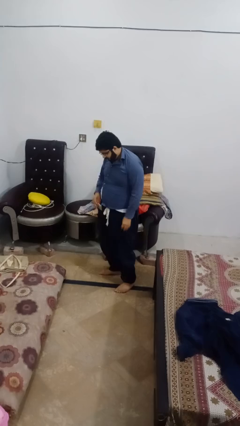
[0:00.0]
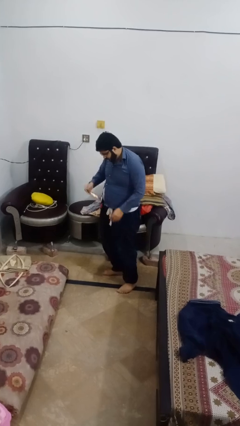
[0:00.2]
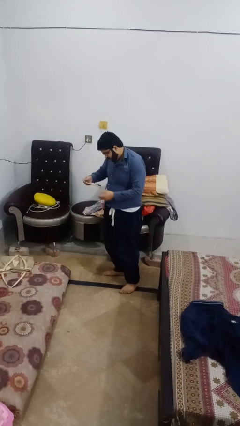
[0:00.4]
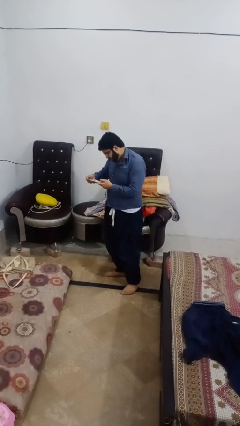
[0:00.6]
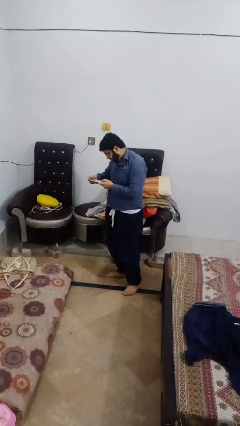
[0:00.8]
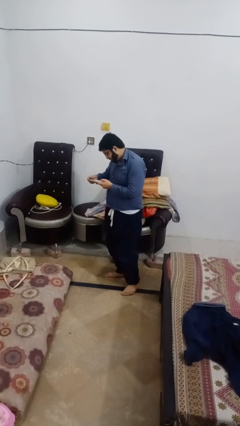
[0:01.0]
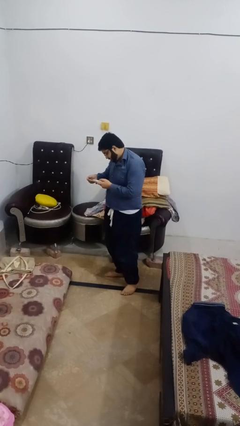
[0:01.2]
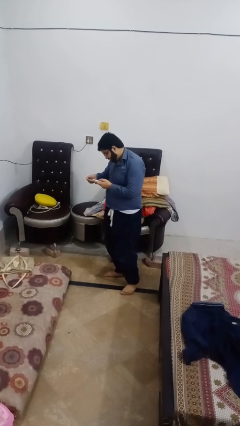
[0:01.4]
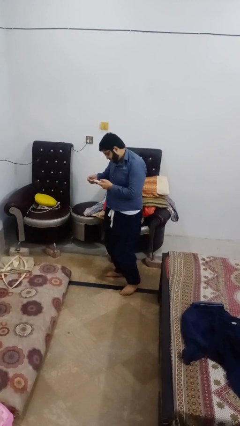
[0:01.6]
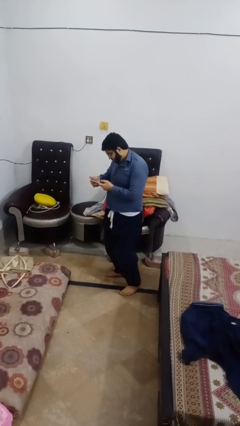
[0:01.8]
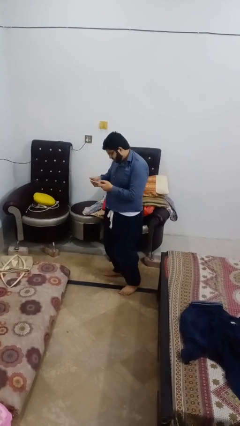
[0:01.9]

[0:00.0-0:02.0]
person takes phone from pocket

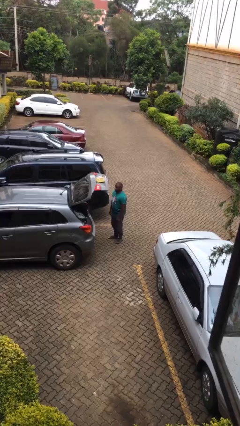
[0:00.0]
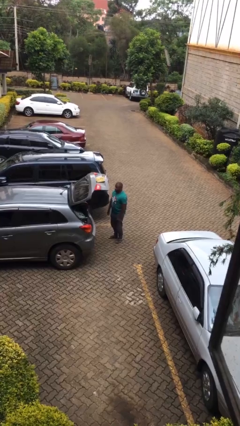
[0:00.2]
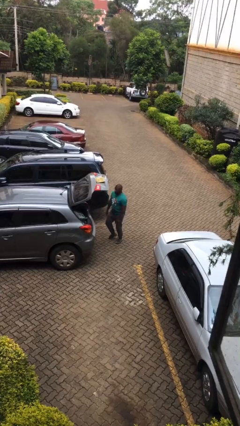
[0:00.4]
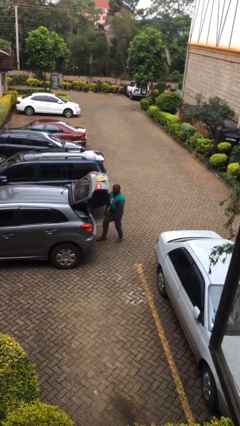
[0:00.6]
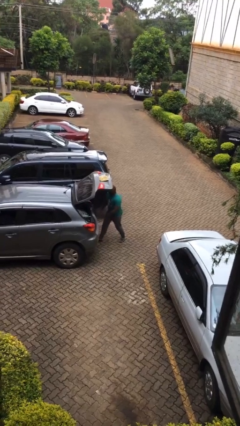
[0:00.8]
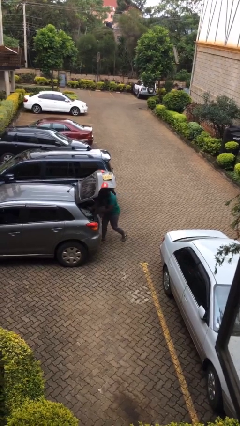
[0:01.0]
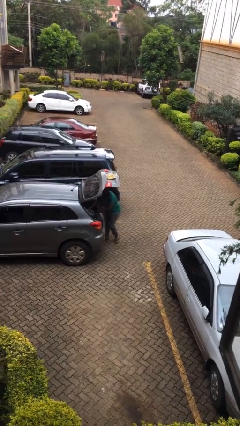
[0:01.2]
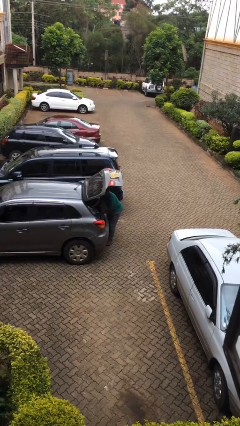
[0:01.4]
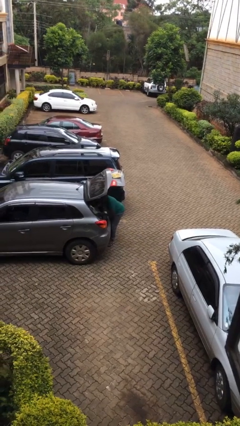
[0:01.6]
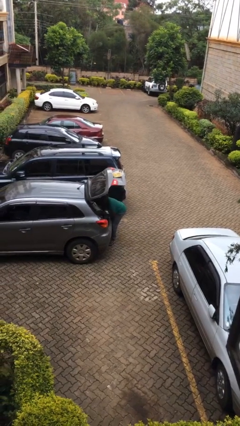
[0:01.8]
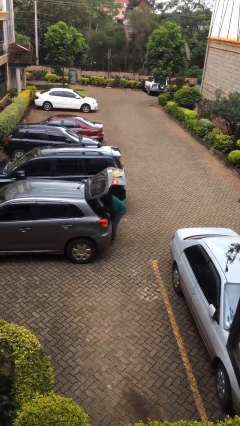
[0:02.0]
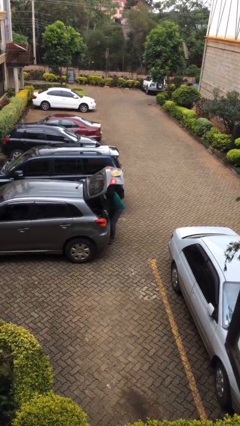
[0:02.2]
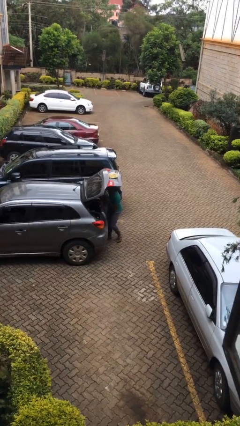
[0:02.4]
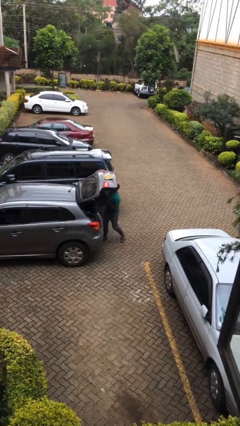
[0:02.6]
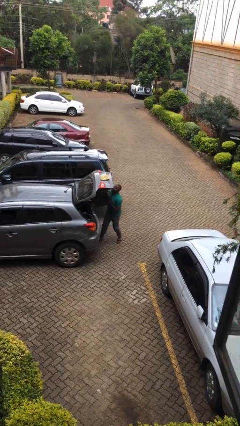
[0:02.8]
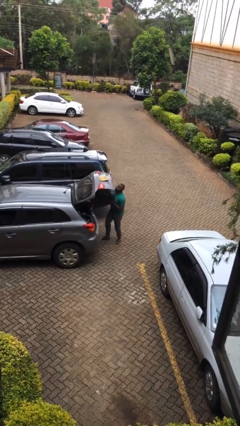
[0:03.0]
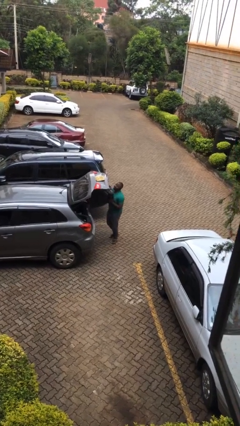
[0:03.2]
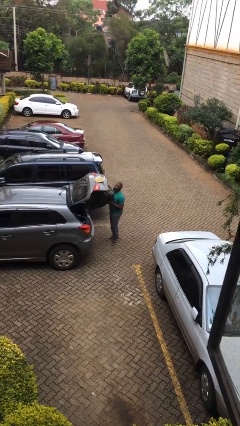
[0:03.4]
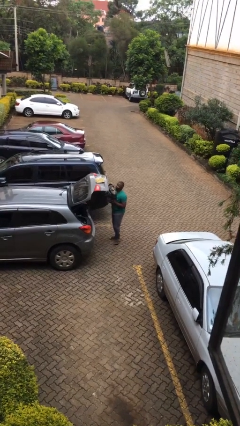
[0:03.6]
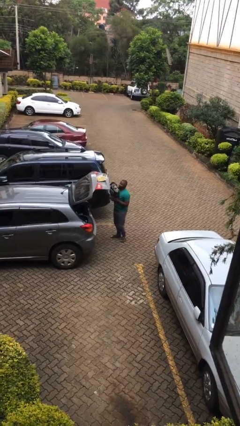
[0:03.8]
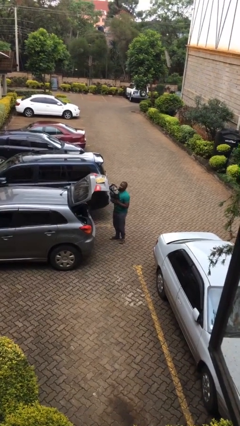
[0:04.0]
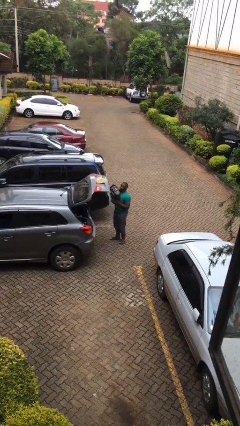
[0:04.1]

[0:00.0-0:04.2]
person unloads car

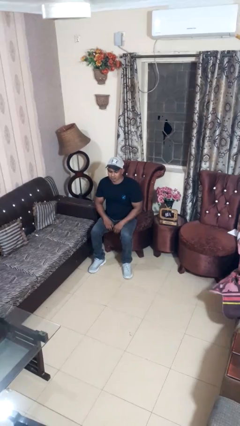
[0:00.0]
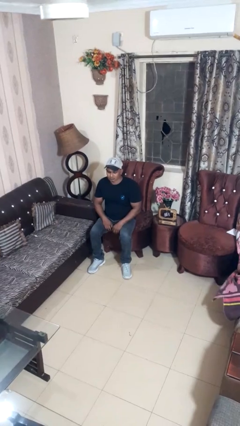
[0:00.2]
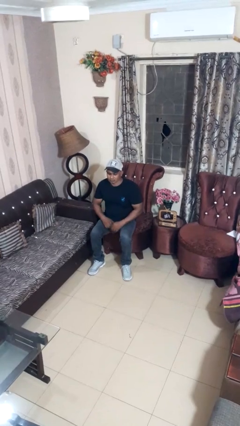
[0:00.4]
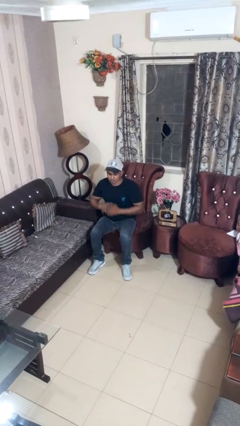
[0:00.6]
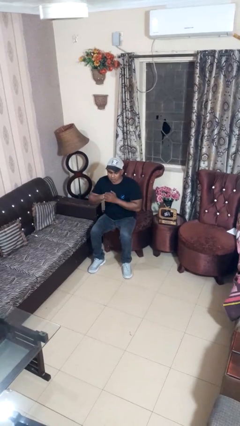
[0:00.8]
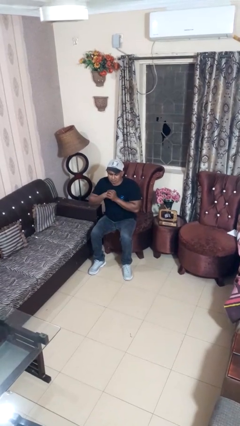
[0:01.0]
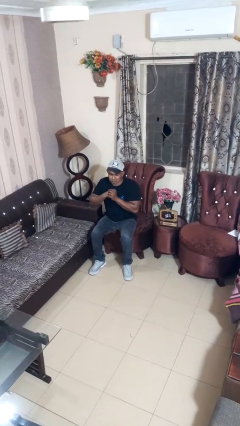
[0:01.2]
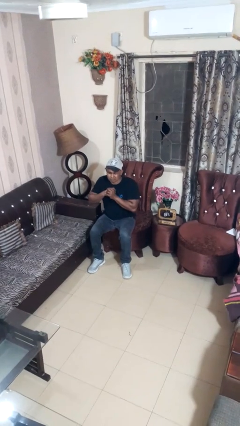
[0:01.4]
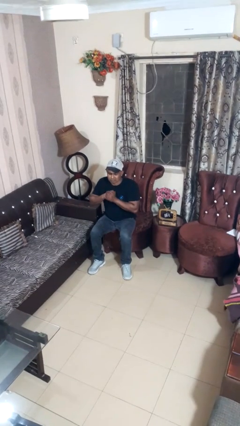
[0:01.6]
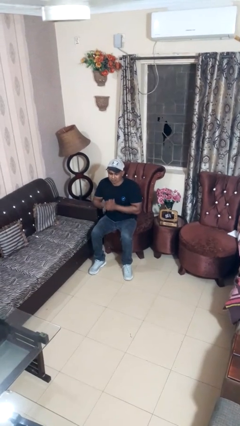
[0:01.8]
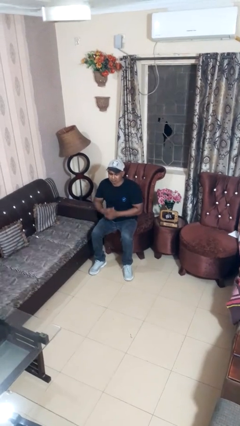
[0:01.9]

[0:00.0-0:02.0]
person cracks knuckles

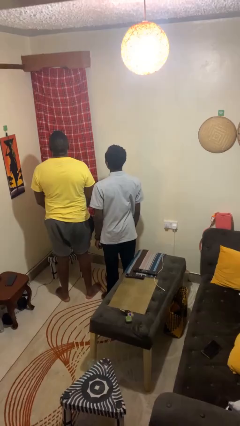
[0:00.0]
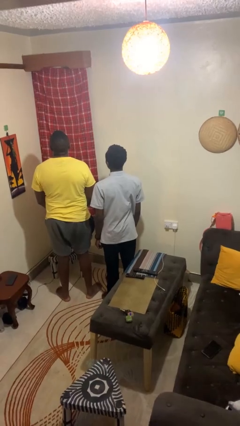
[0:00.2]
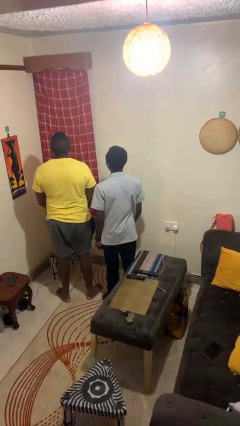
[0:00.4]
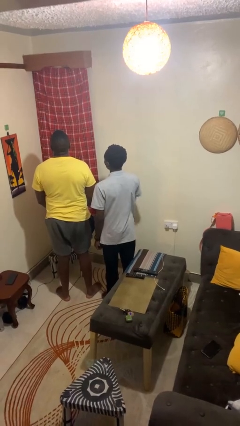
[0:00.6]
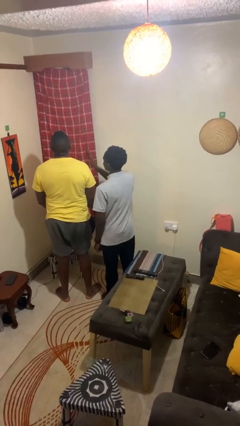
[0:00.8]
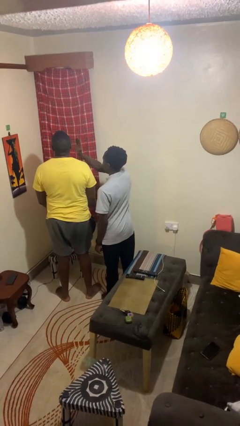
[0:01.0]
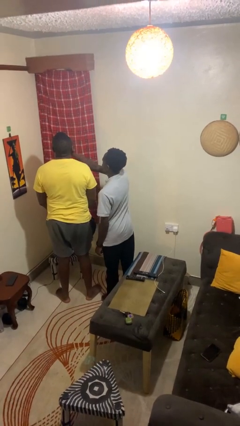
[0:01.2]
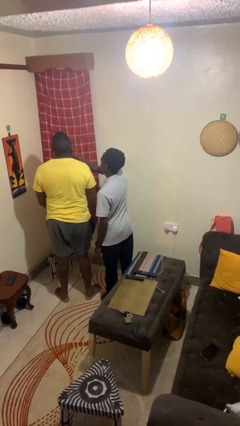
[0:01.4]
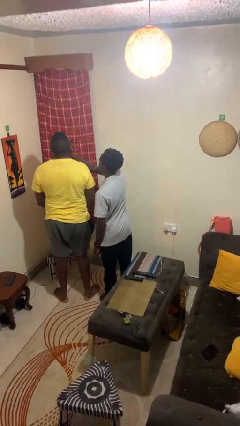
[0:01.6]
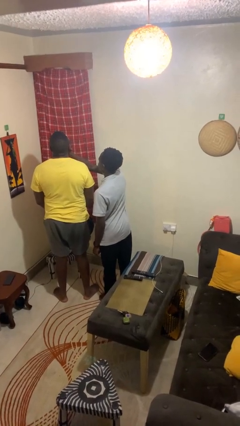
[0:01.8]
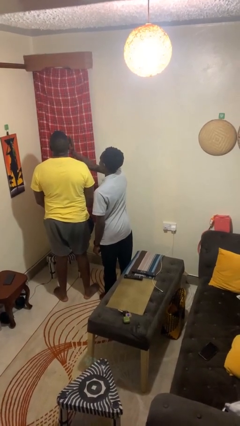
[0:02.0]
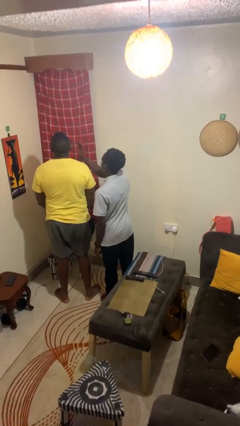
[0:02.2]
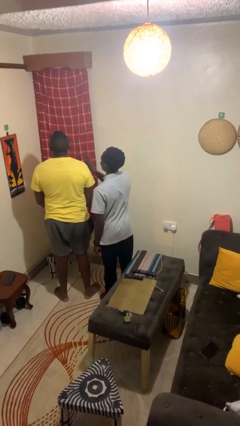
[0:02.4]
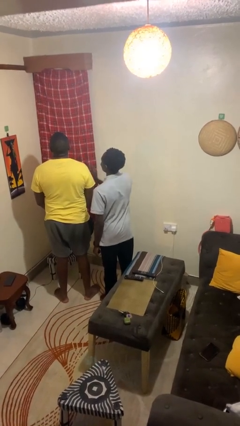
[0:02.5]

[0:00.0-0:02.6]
person touches face of person

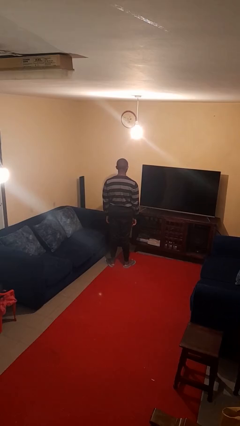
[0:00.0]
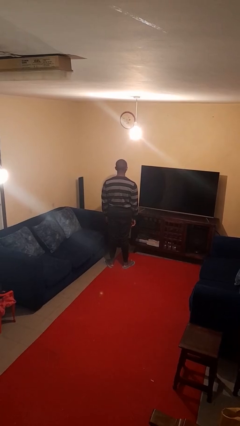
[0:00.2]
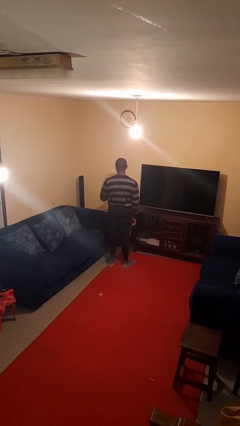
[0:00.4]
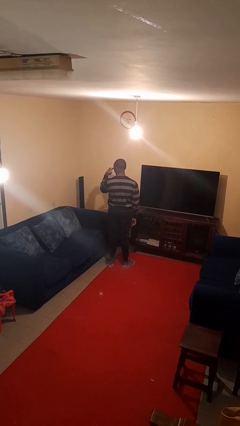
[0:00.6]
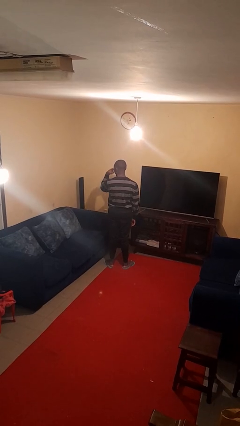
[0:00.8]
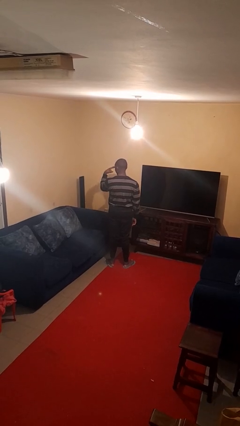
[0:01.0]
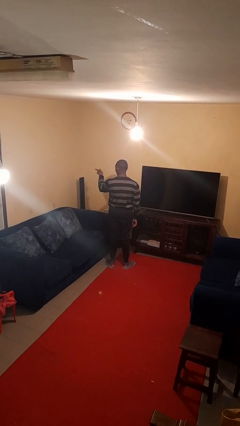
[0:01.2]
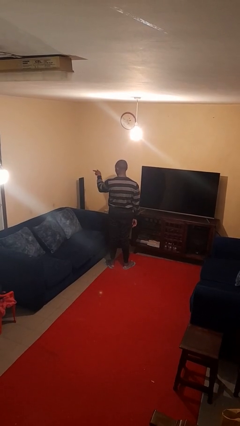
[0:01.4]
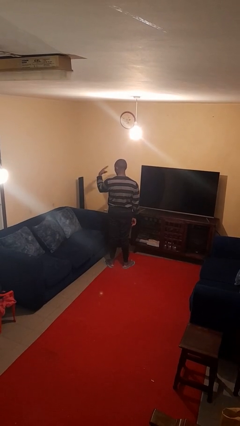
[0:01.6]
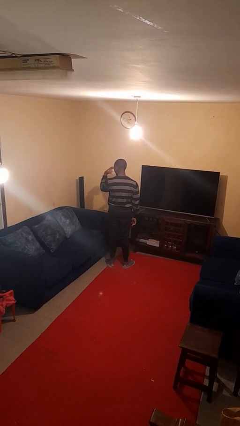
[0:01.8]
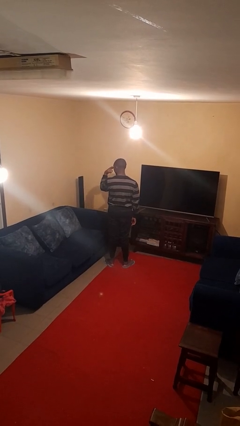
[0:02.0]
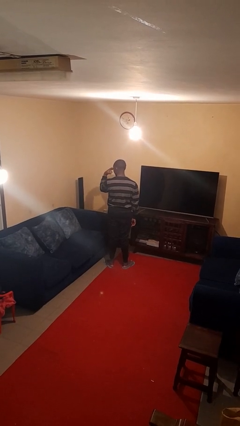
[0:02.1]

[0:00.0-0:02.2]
person gestures watch closely

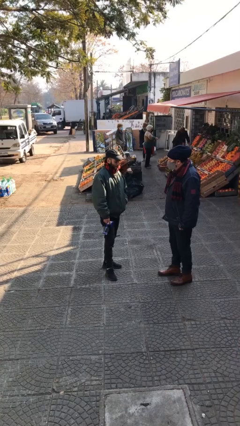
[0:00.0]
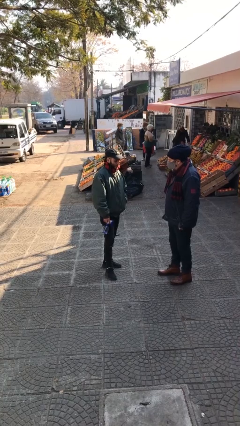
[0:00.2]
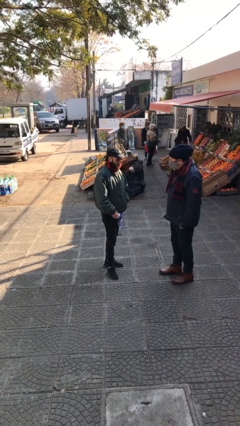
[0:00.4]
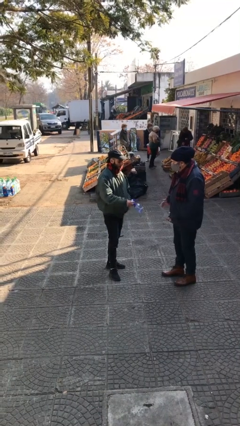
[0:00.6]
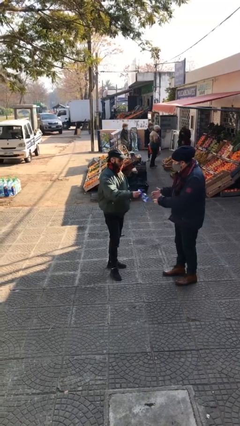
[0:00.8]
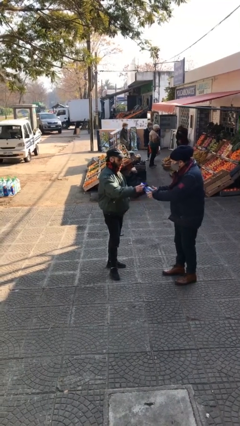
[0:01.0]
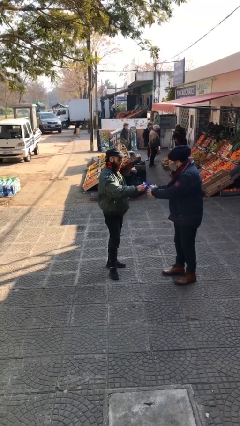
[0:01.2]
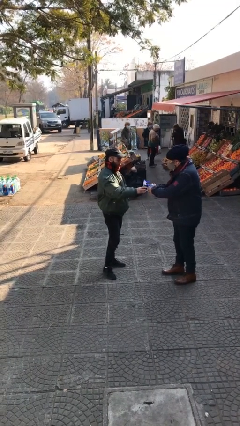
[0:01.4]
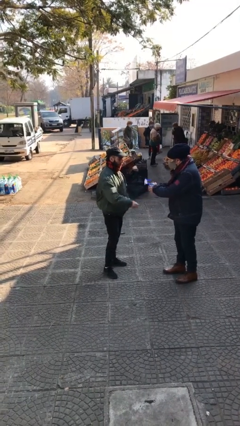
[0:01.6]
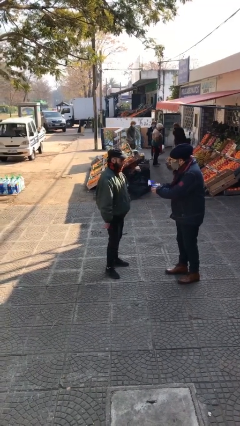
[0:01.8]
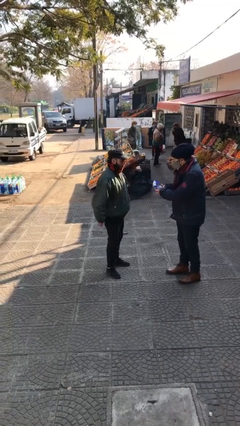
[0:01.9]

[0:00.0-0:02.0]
person transfers object to person

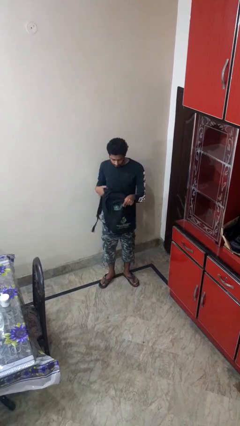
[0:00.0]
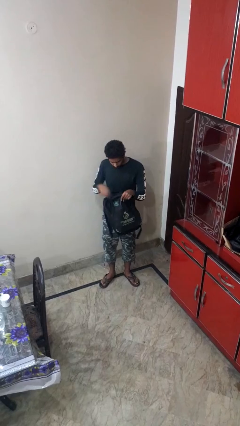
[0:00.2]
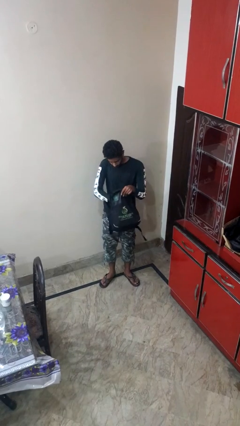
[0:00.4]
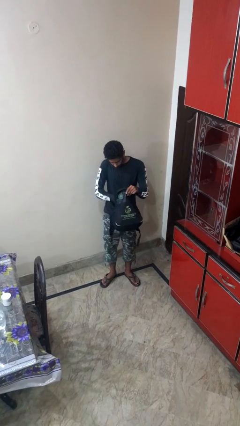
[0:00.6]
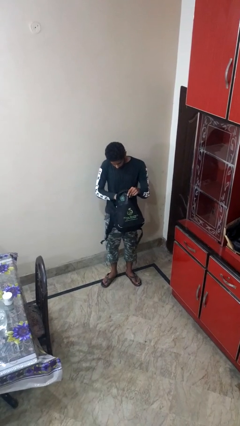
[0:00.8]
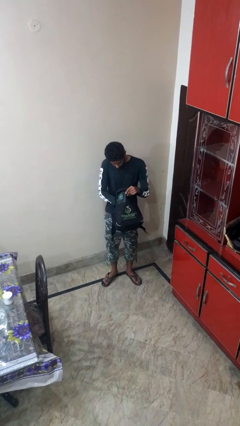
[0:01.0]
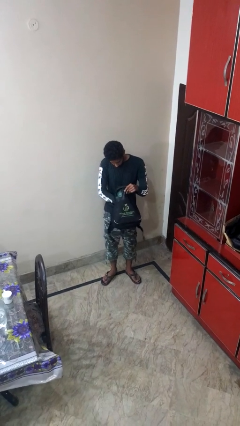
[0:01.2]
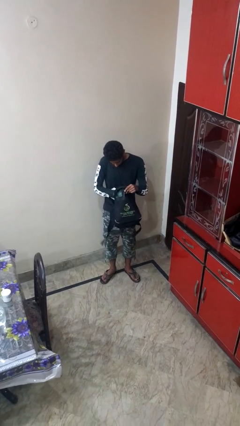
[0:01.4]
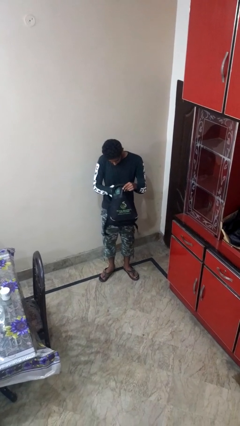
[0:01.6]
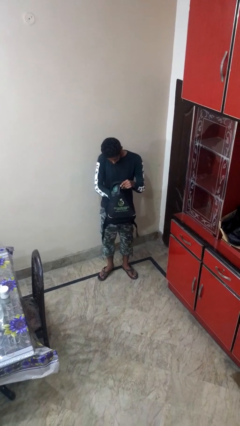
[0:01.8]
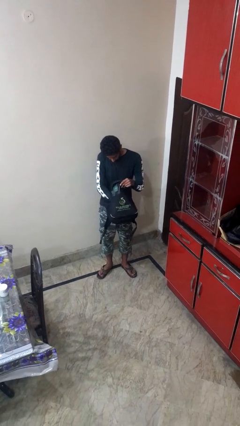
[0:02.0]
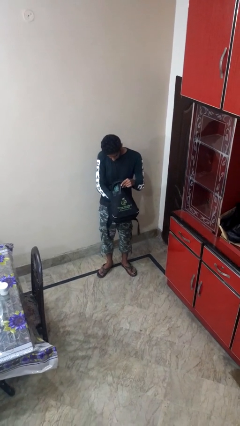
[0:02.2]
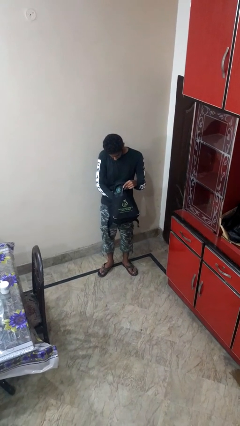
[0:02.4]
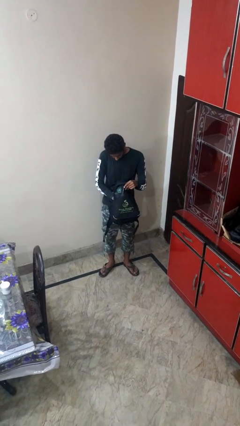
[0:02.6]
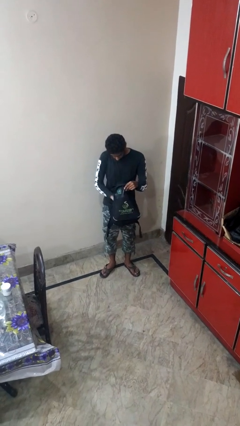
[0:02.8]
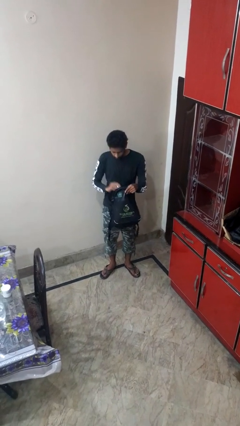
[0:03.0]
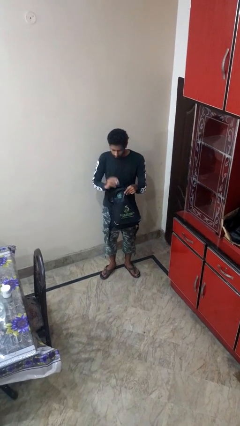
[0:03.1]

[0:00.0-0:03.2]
person searches in backpack
